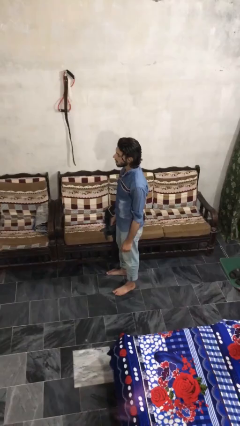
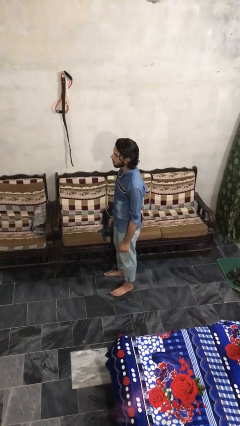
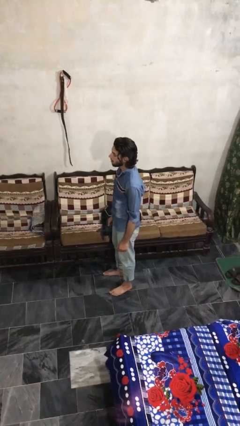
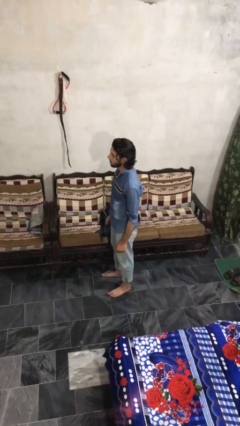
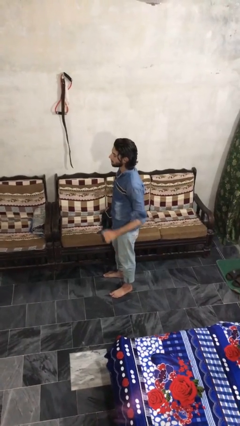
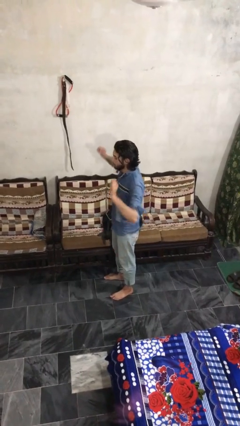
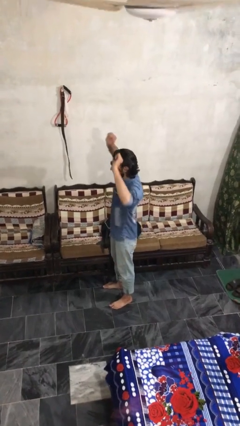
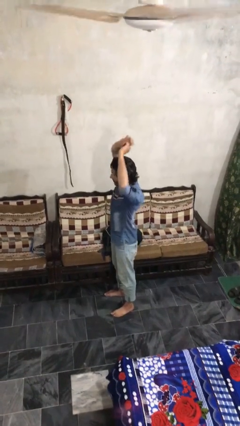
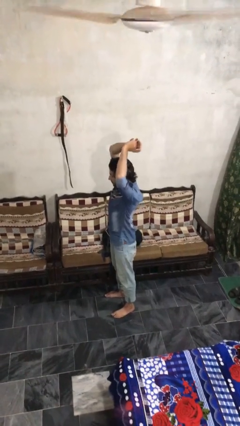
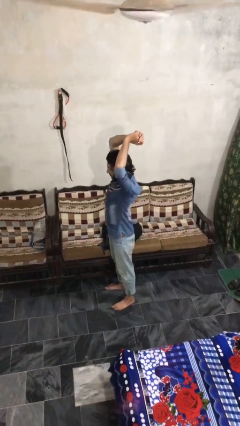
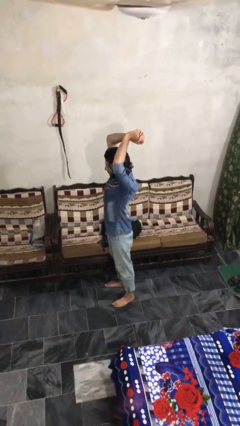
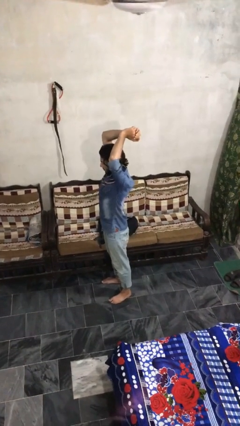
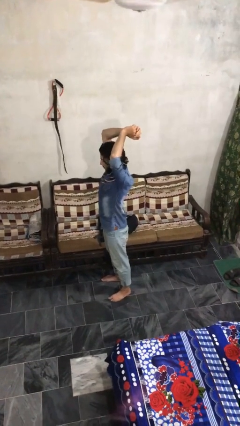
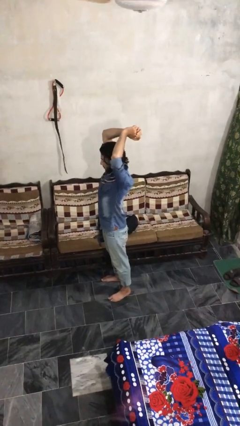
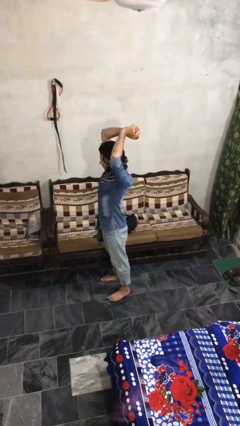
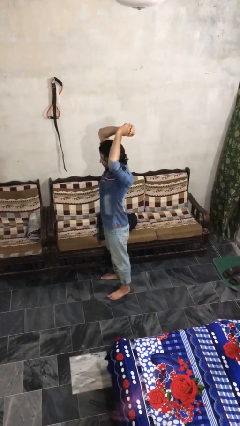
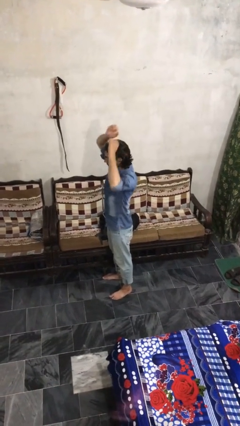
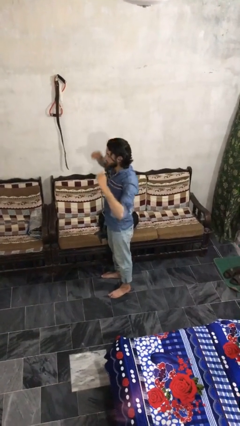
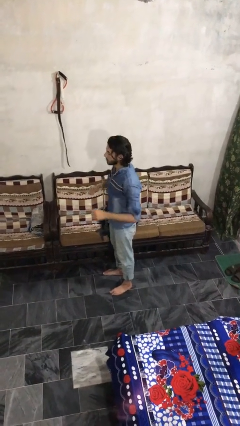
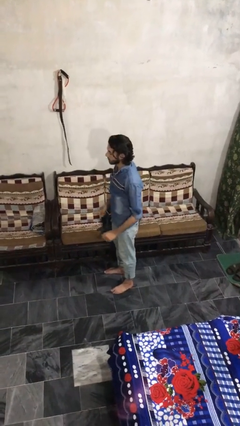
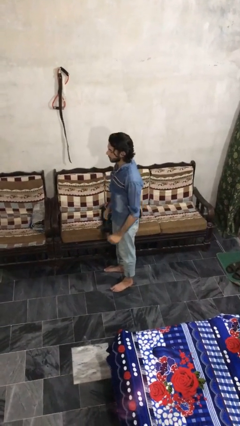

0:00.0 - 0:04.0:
person stretches arms over head

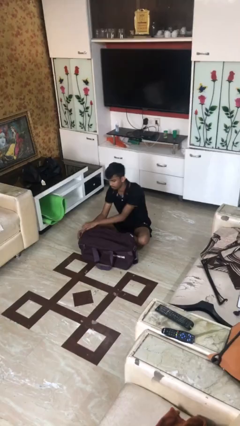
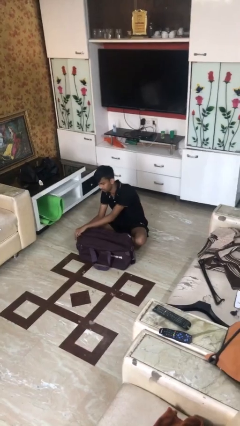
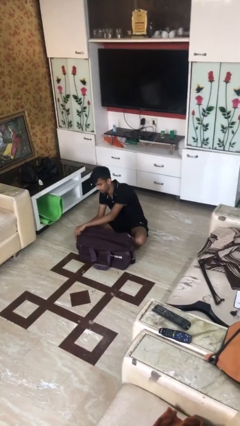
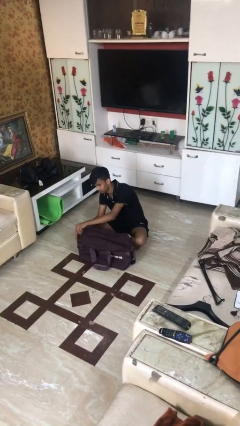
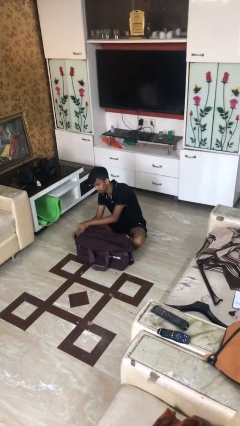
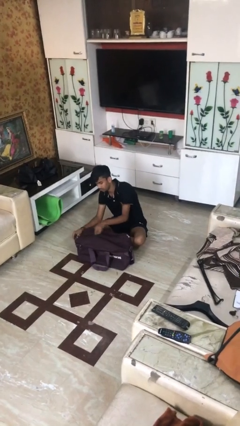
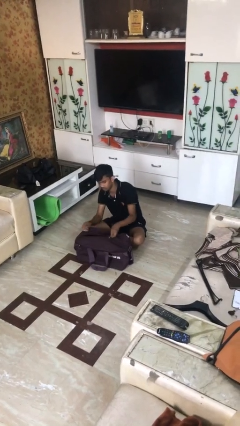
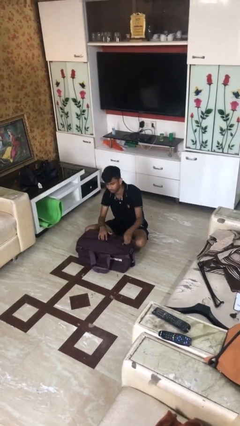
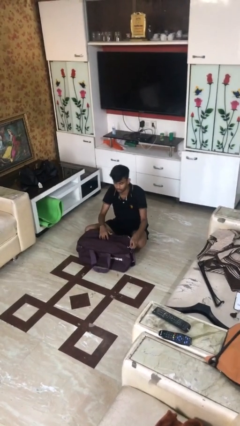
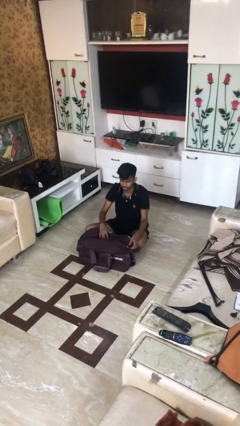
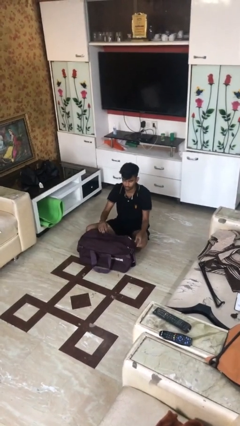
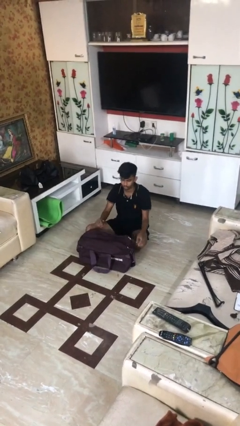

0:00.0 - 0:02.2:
person opens suitcase

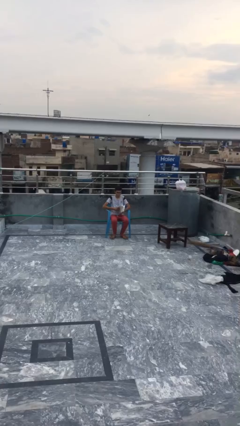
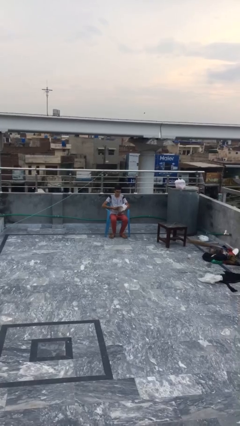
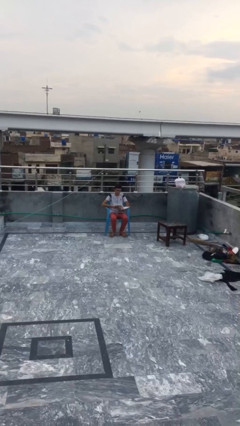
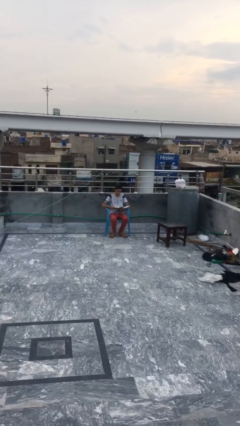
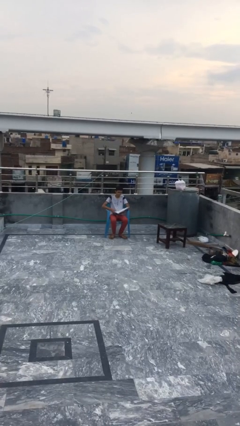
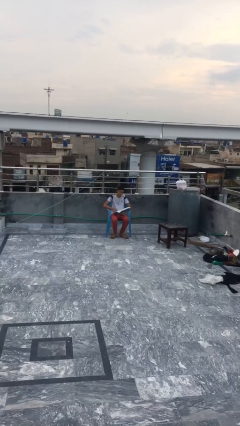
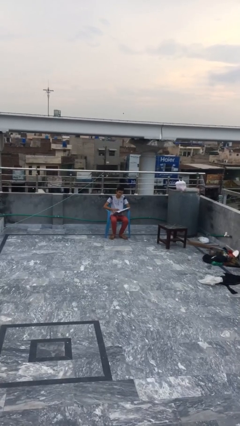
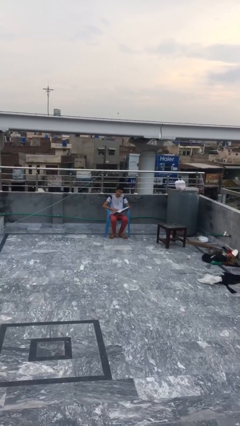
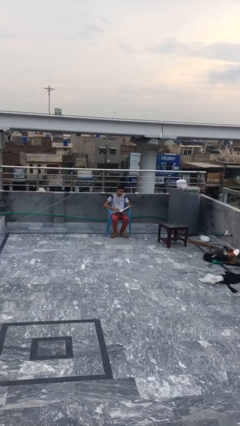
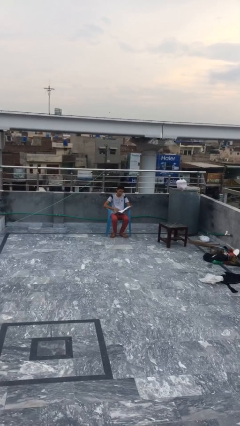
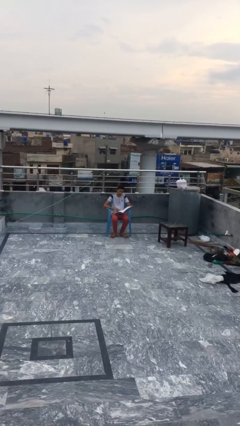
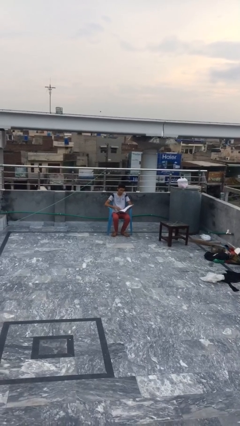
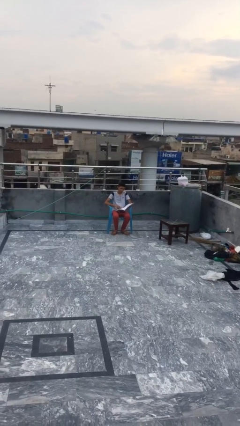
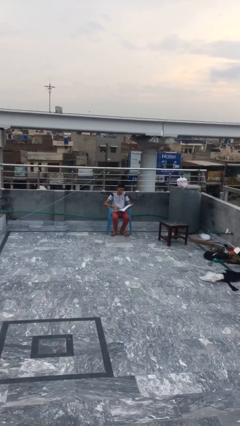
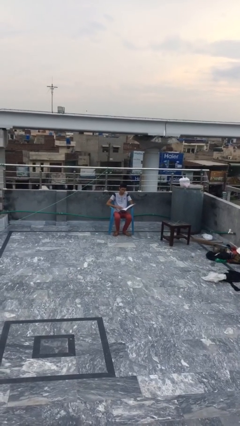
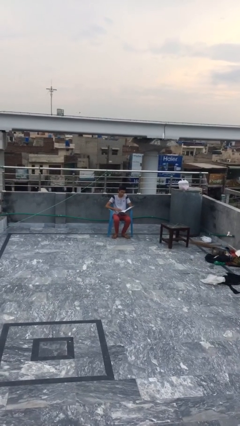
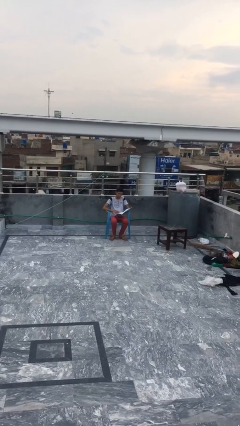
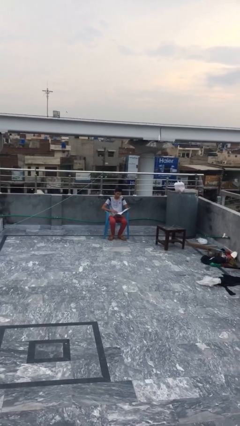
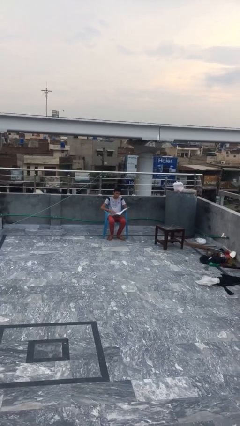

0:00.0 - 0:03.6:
person reads document

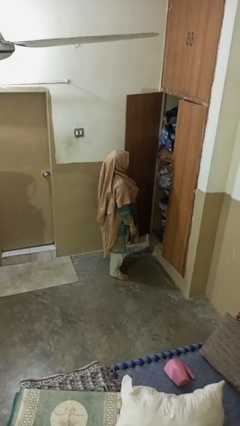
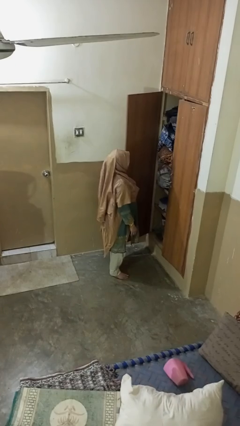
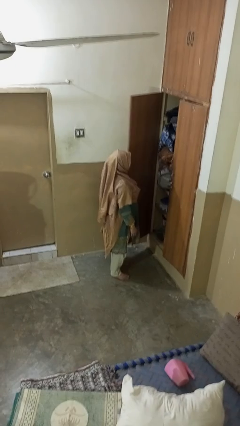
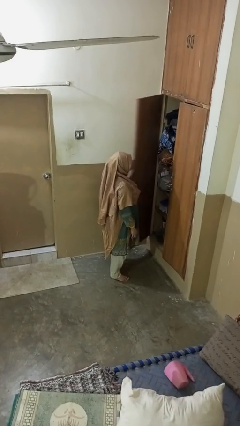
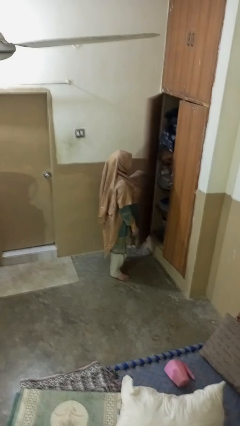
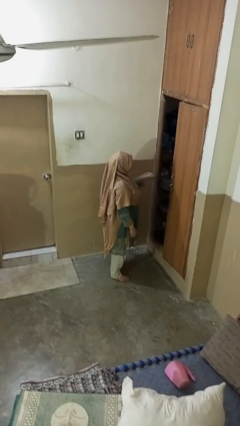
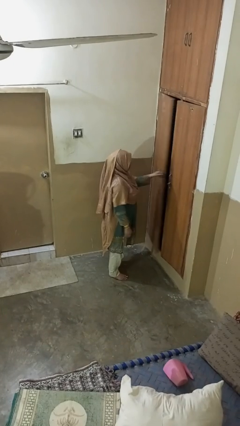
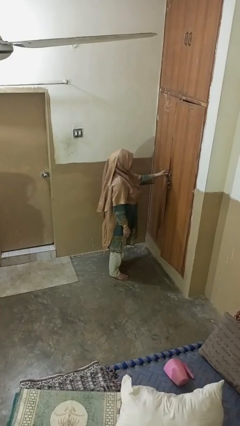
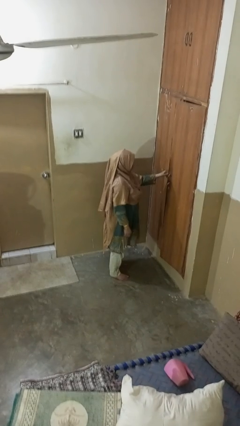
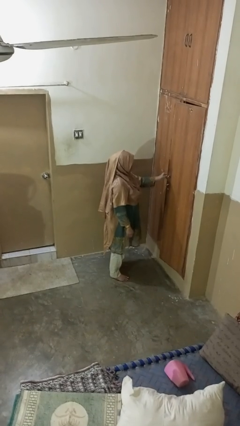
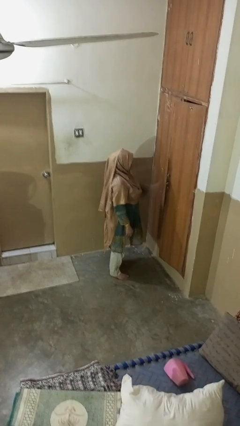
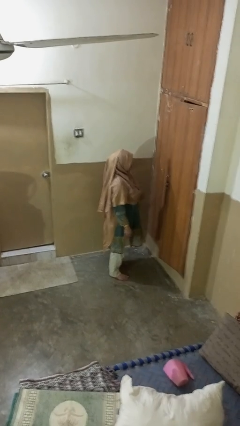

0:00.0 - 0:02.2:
person closes closet door

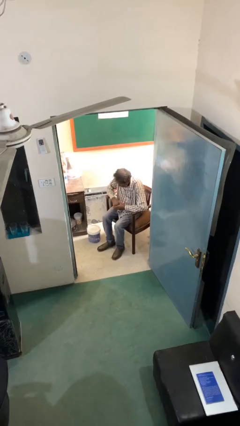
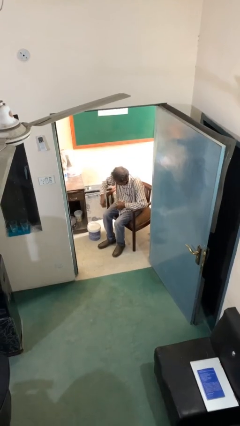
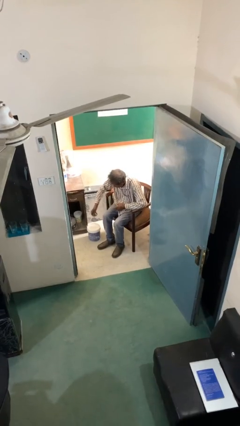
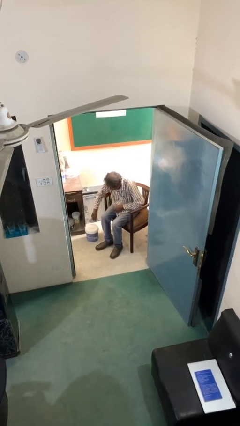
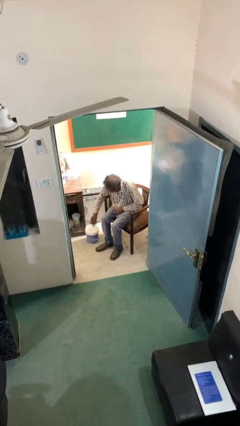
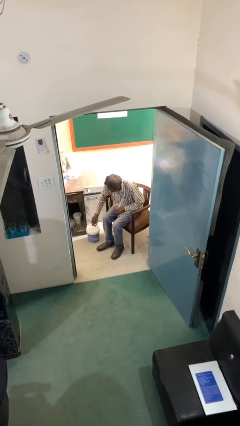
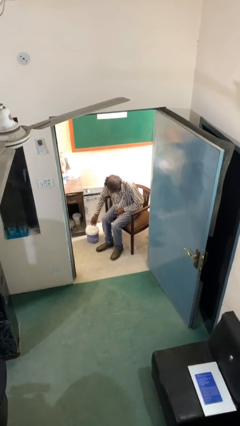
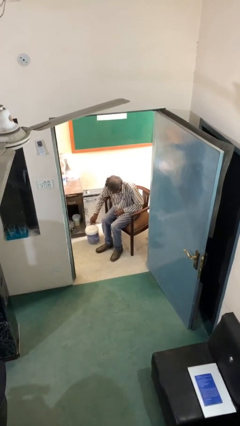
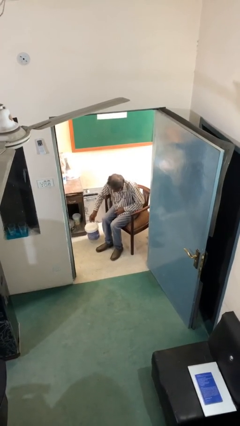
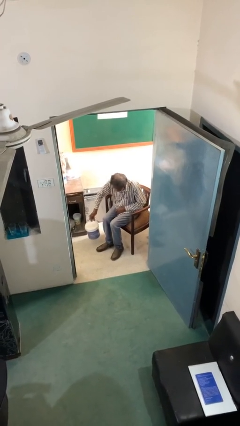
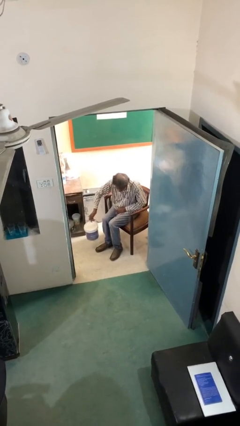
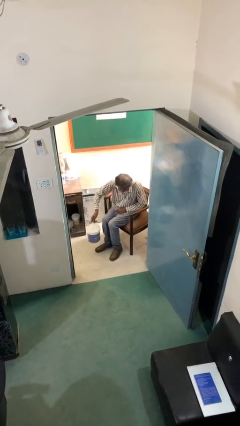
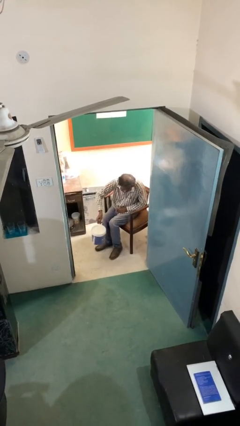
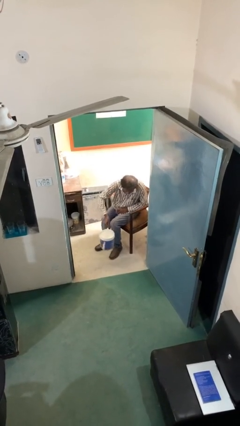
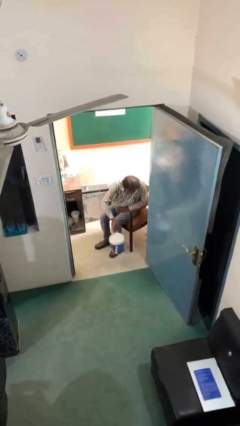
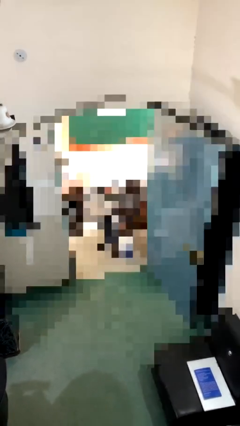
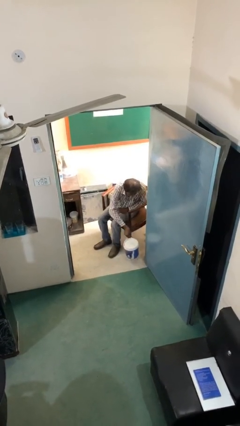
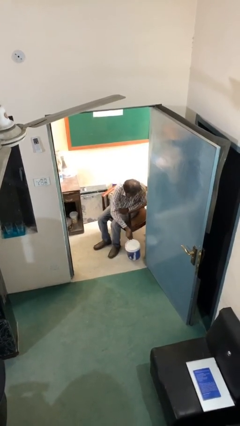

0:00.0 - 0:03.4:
person picks up object from floor

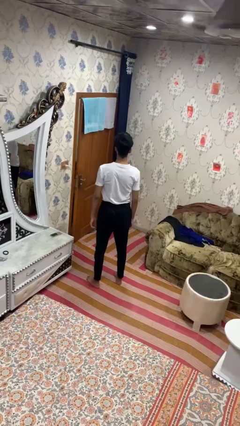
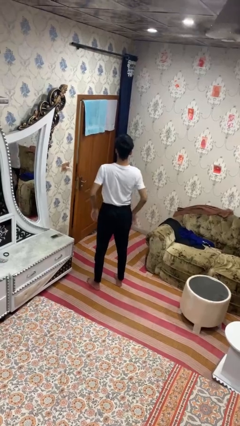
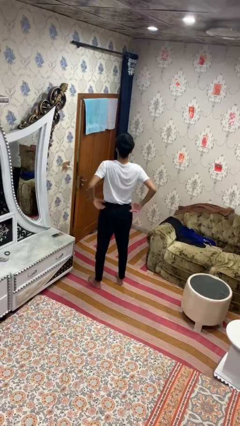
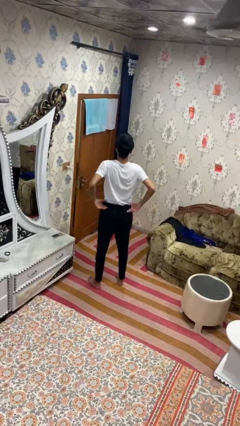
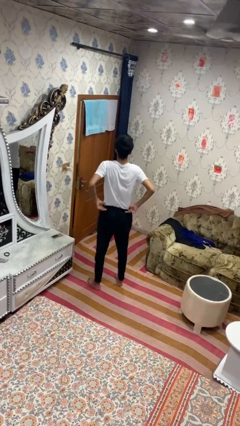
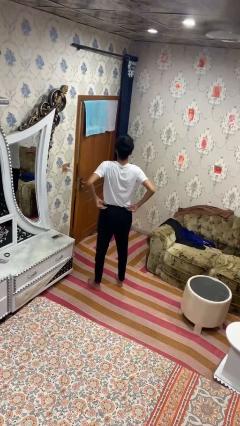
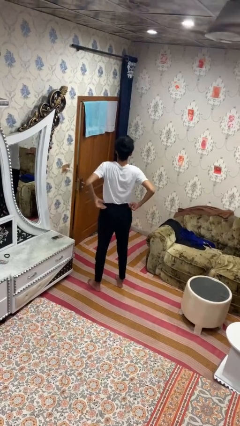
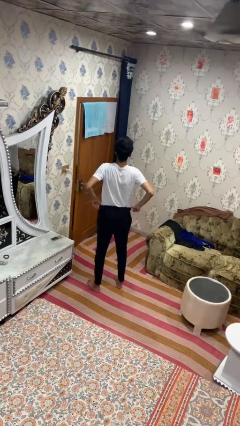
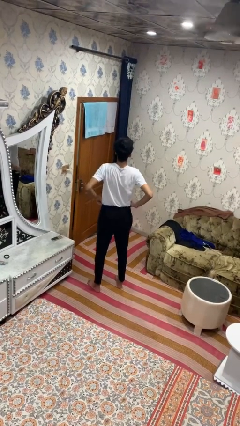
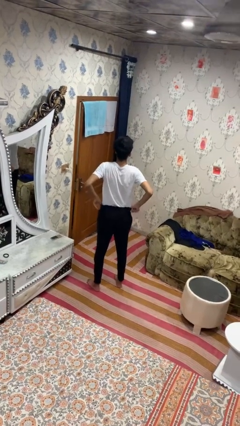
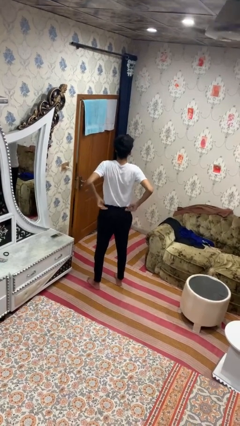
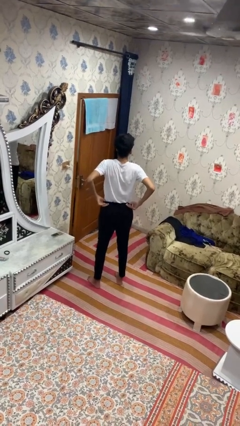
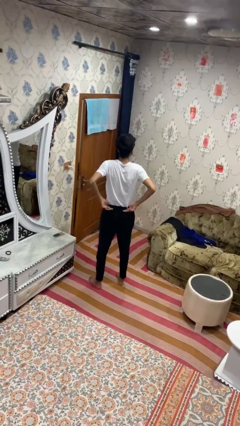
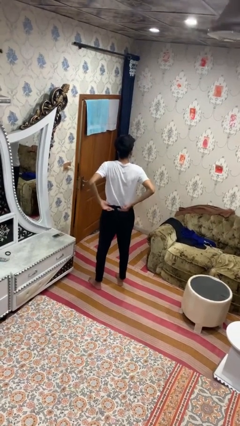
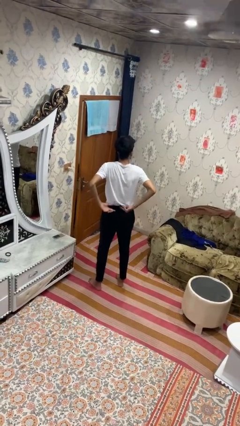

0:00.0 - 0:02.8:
person hikes up pants
